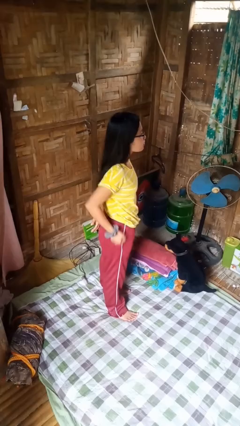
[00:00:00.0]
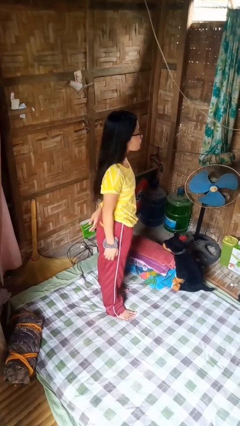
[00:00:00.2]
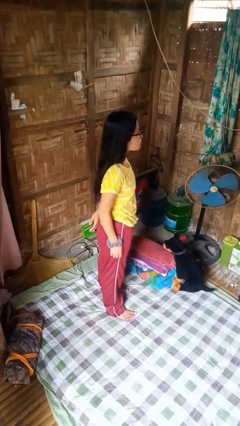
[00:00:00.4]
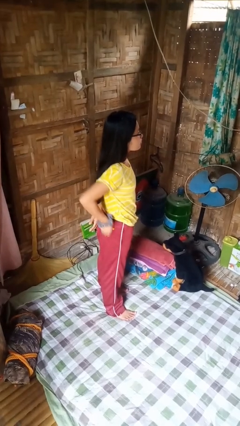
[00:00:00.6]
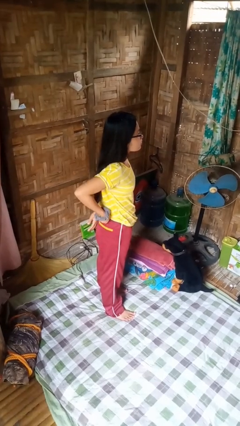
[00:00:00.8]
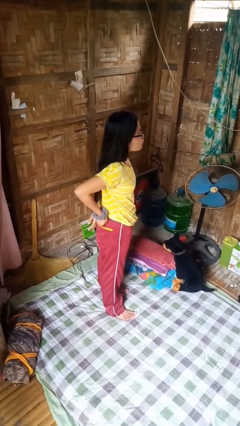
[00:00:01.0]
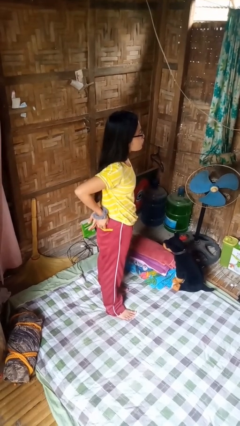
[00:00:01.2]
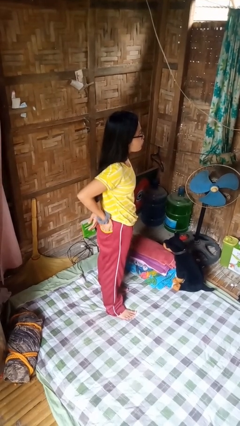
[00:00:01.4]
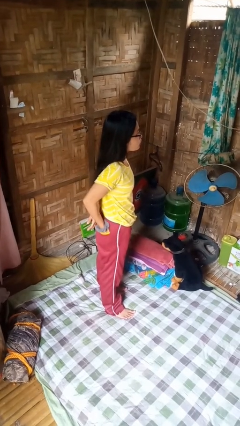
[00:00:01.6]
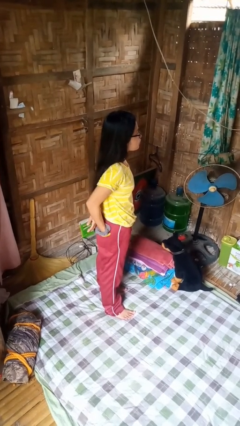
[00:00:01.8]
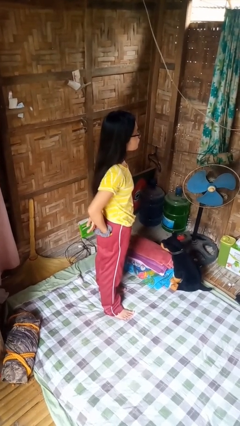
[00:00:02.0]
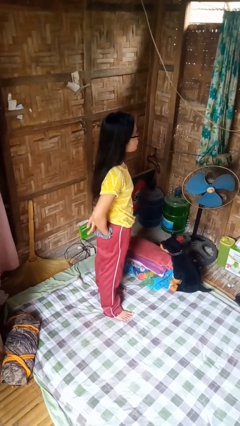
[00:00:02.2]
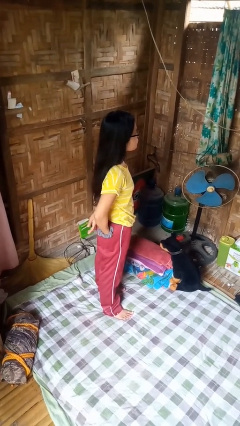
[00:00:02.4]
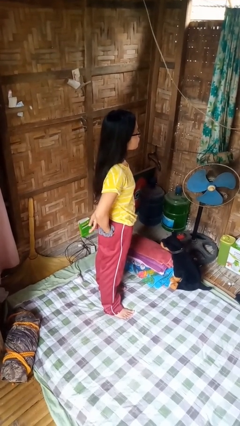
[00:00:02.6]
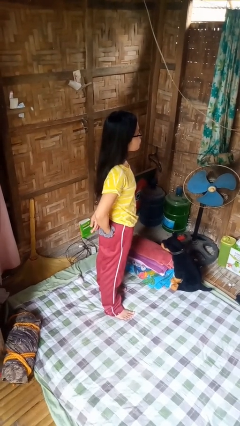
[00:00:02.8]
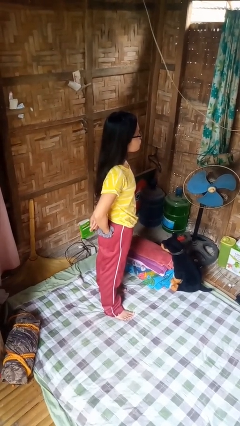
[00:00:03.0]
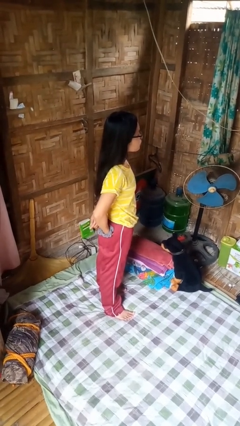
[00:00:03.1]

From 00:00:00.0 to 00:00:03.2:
person puts hands in back pockets

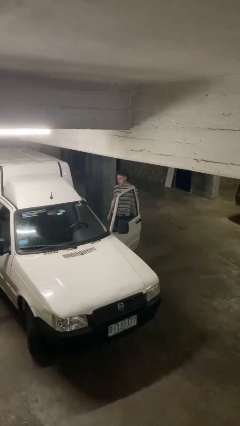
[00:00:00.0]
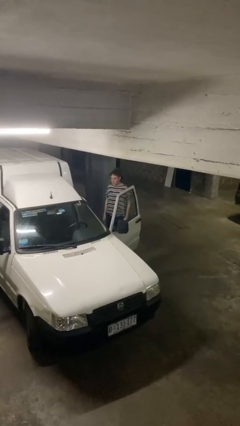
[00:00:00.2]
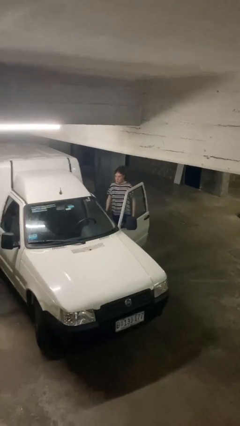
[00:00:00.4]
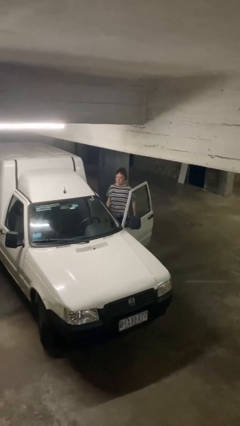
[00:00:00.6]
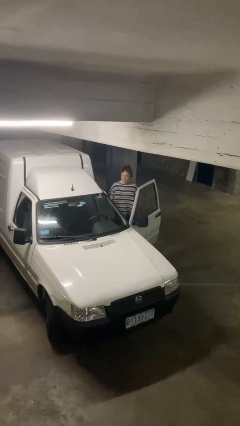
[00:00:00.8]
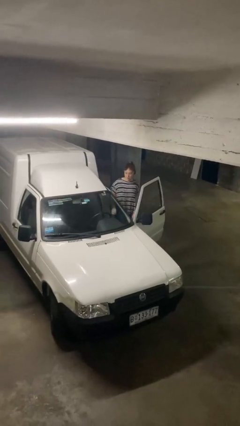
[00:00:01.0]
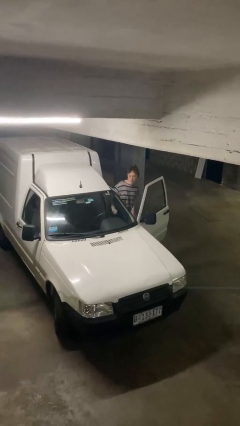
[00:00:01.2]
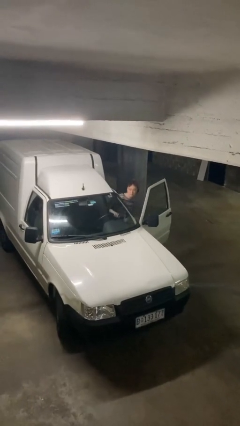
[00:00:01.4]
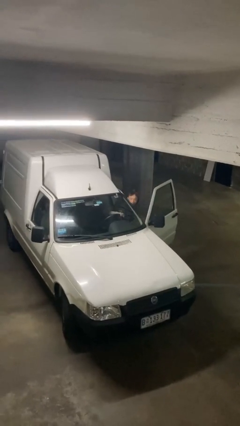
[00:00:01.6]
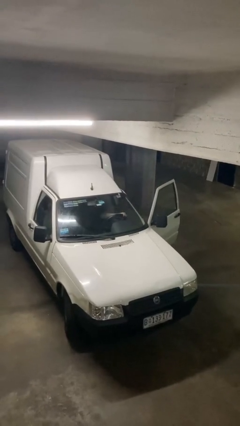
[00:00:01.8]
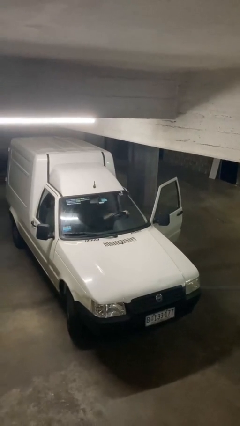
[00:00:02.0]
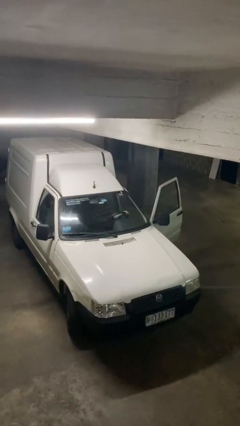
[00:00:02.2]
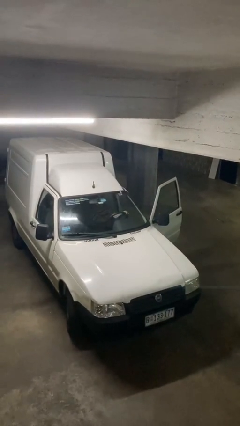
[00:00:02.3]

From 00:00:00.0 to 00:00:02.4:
person enters car

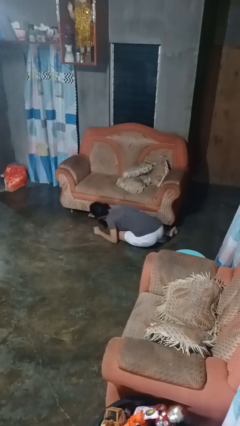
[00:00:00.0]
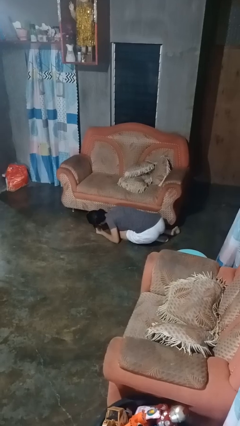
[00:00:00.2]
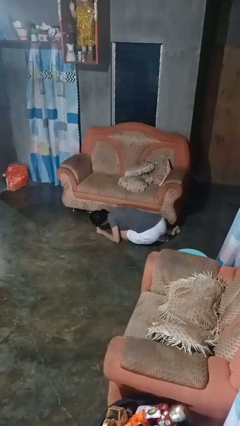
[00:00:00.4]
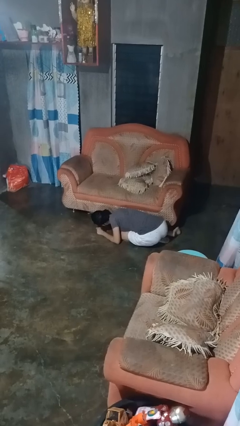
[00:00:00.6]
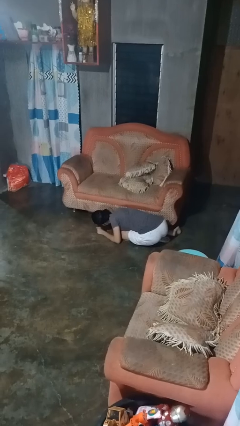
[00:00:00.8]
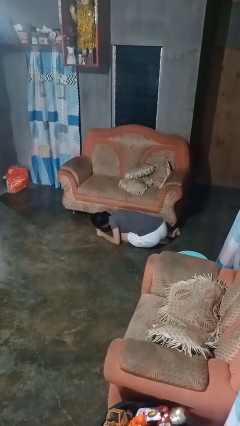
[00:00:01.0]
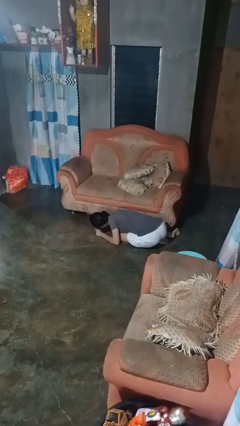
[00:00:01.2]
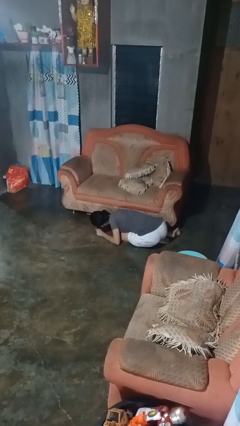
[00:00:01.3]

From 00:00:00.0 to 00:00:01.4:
person searches under couch

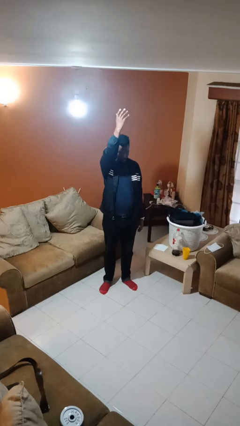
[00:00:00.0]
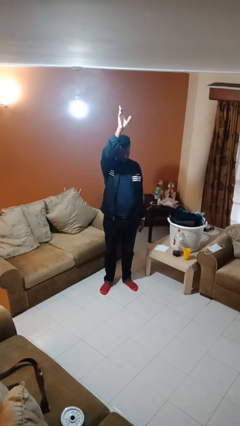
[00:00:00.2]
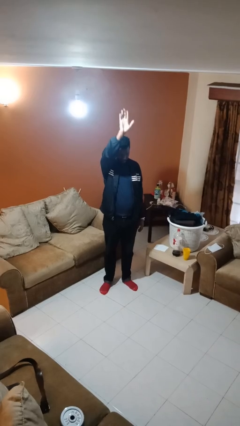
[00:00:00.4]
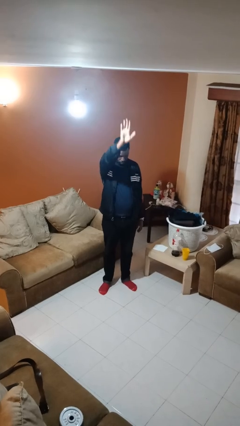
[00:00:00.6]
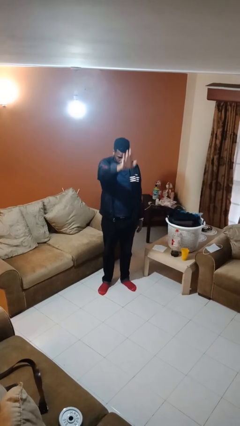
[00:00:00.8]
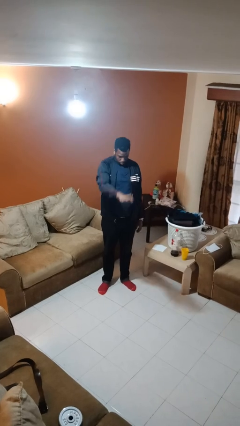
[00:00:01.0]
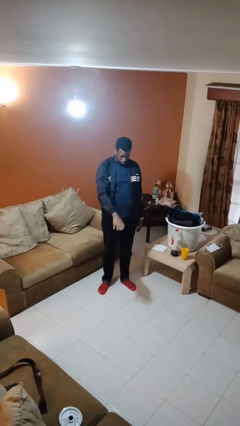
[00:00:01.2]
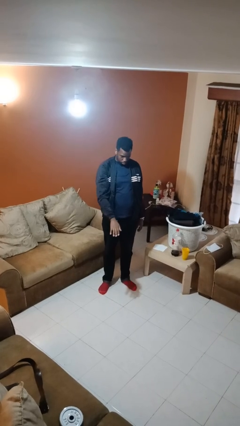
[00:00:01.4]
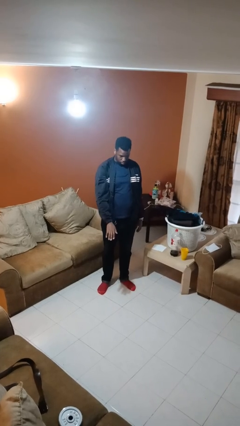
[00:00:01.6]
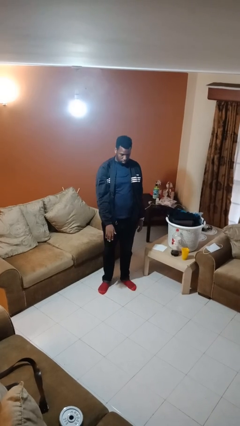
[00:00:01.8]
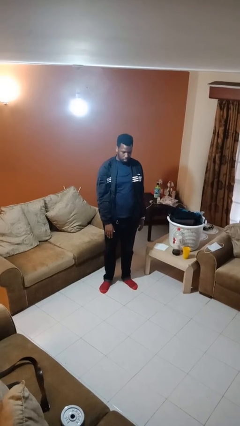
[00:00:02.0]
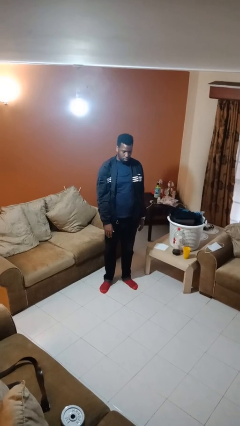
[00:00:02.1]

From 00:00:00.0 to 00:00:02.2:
person gestures swipe down

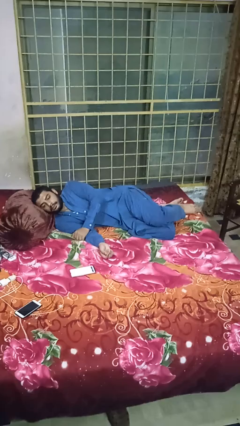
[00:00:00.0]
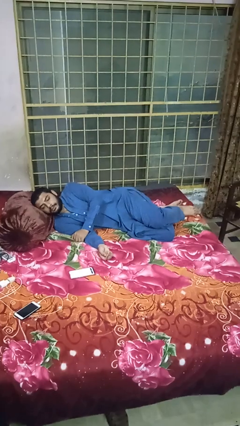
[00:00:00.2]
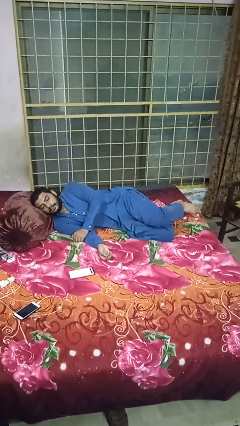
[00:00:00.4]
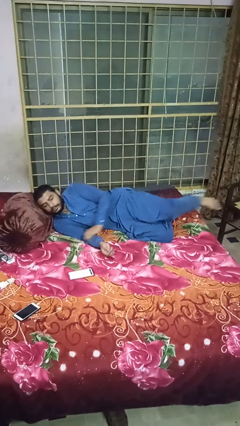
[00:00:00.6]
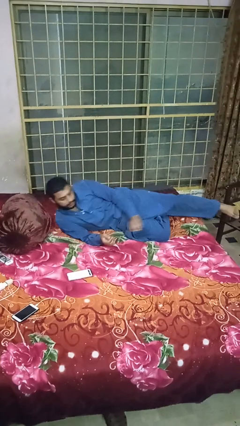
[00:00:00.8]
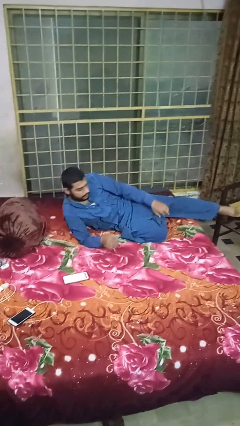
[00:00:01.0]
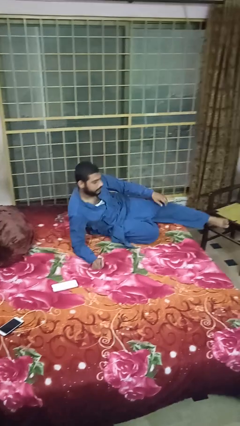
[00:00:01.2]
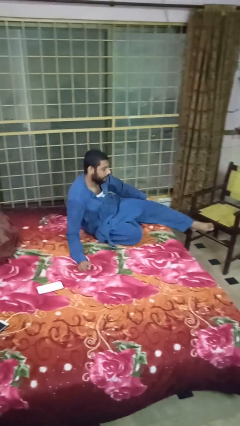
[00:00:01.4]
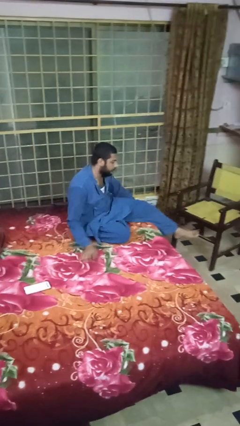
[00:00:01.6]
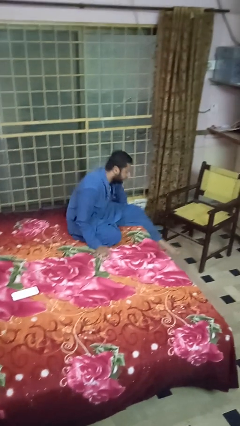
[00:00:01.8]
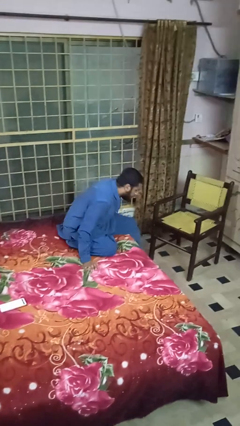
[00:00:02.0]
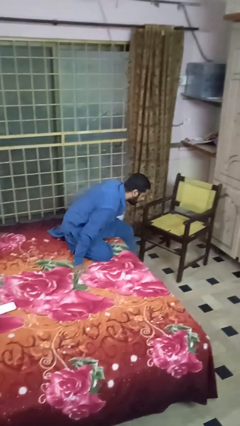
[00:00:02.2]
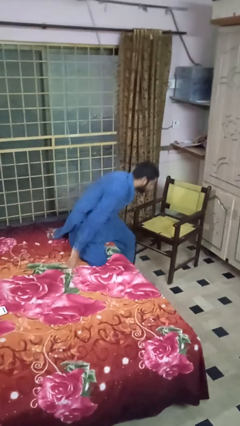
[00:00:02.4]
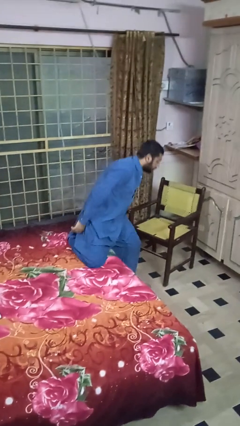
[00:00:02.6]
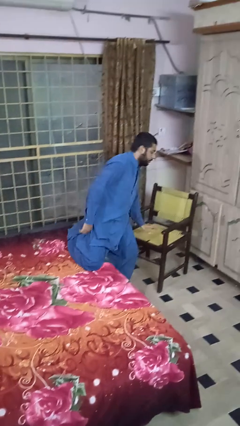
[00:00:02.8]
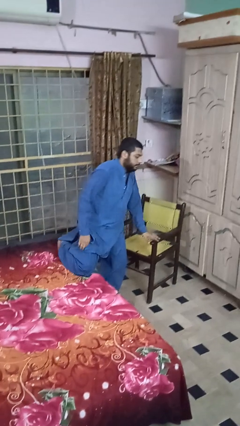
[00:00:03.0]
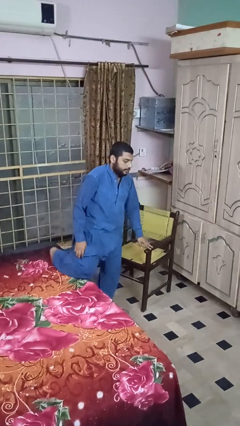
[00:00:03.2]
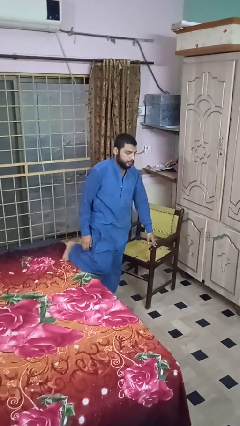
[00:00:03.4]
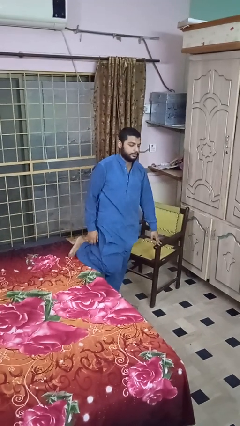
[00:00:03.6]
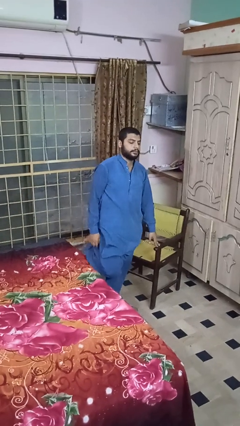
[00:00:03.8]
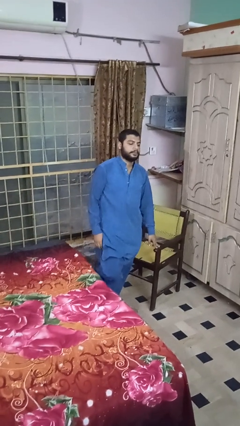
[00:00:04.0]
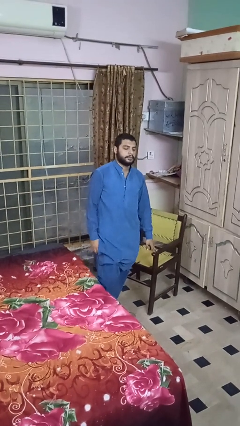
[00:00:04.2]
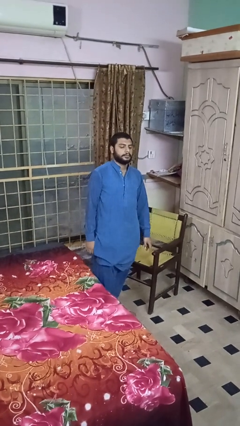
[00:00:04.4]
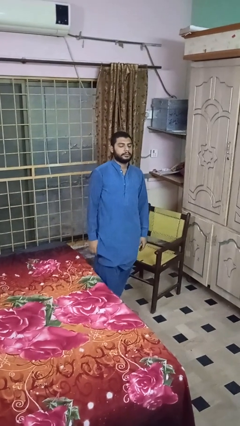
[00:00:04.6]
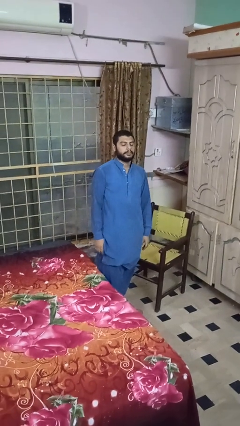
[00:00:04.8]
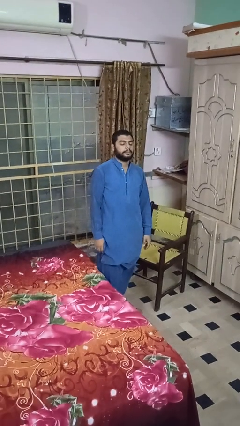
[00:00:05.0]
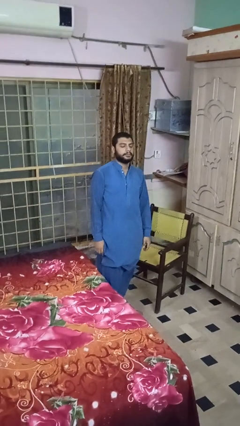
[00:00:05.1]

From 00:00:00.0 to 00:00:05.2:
person stands up

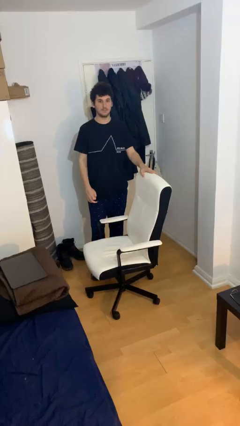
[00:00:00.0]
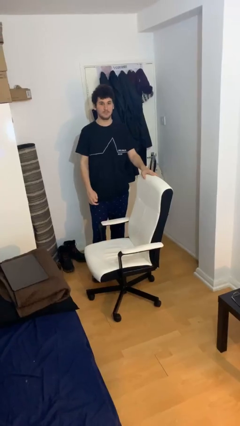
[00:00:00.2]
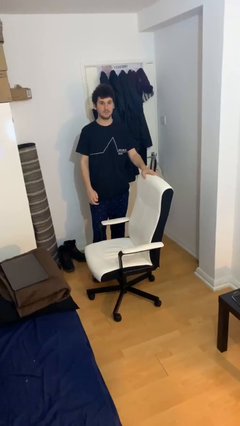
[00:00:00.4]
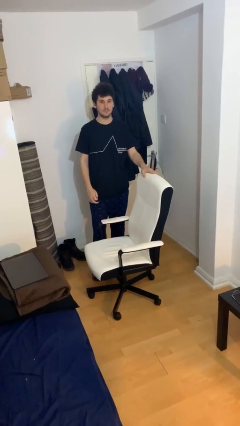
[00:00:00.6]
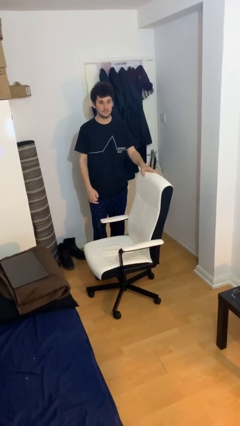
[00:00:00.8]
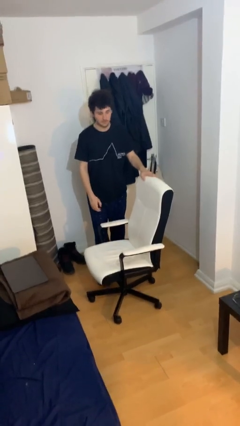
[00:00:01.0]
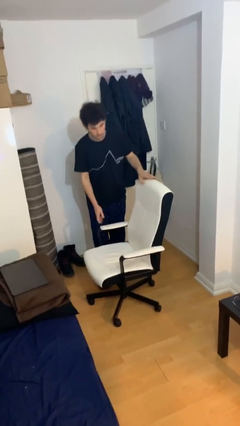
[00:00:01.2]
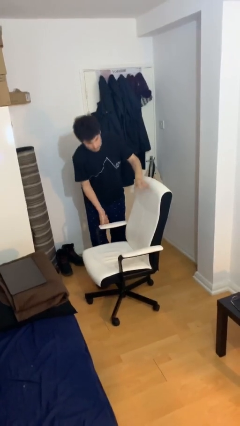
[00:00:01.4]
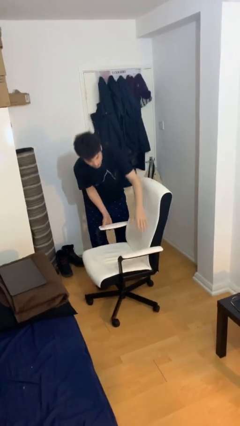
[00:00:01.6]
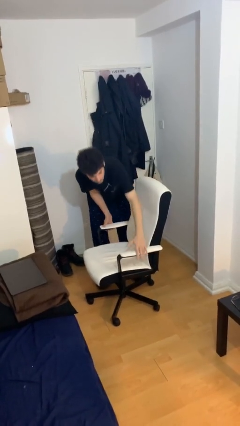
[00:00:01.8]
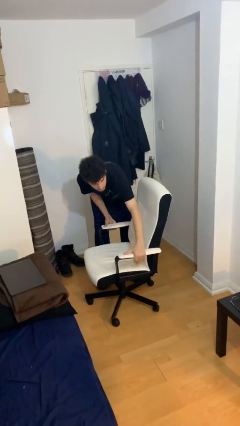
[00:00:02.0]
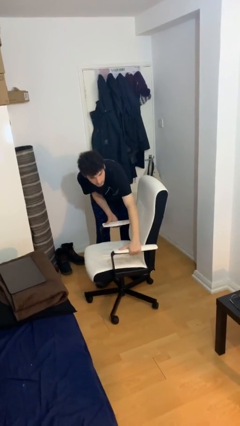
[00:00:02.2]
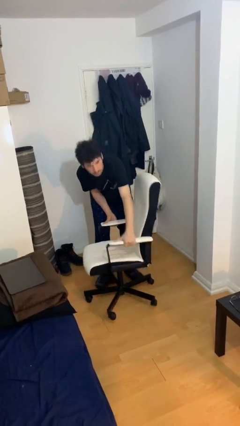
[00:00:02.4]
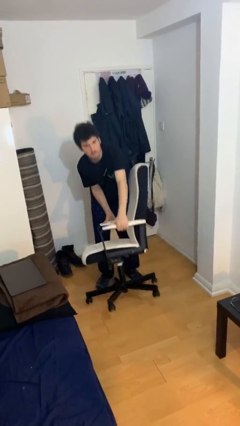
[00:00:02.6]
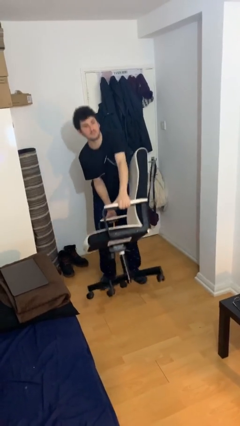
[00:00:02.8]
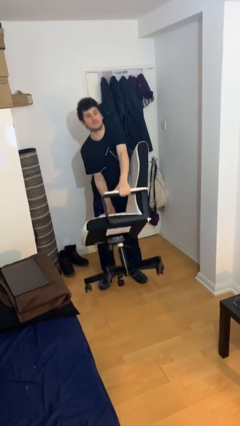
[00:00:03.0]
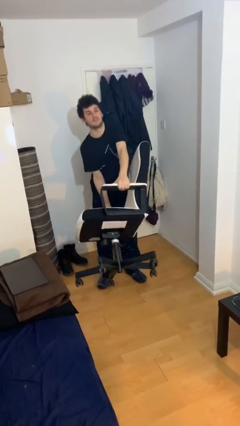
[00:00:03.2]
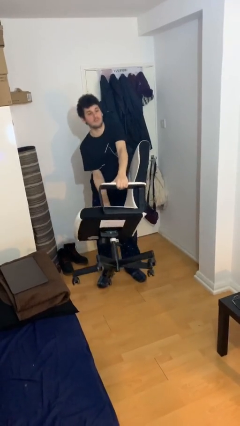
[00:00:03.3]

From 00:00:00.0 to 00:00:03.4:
person picks up object from floor
